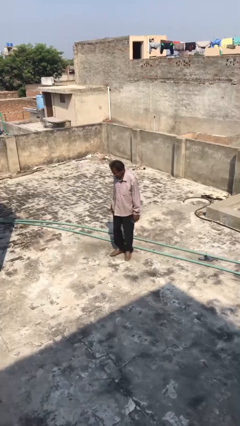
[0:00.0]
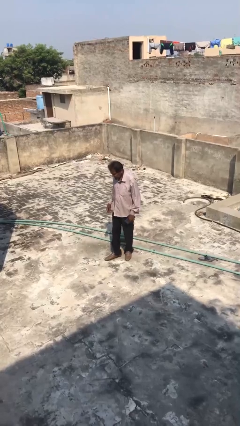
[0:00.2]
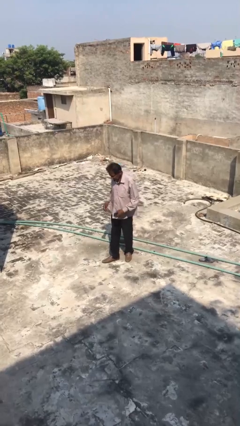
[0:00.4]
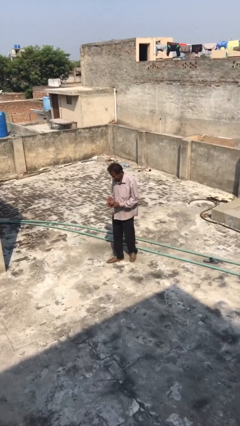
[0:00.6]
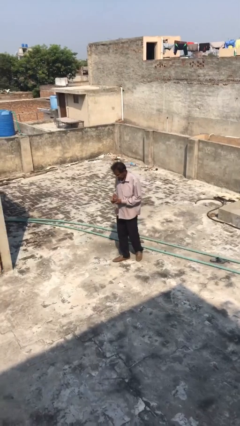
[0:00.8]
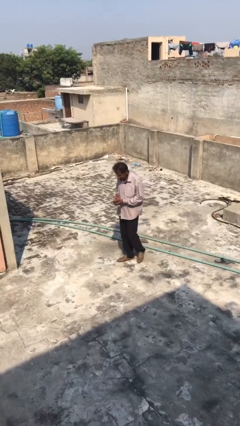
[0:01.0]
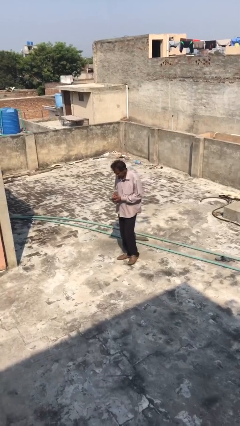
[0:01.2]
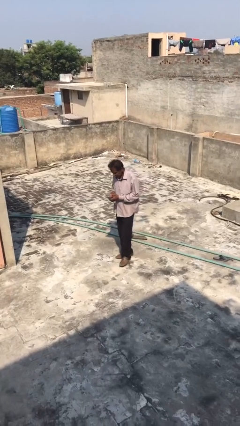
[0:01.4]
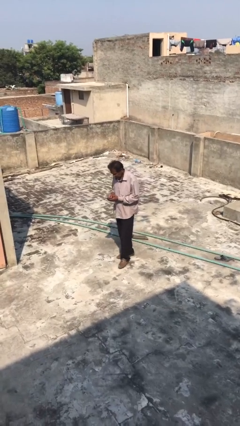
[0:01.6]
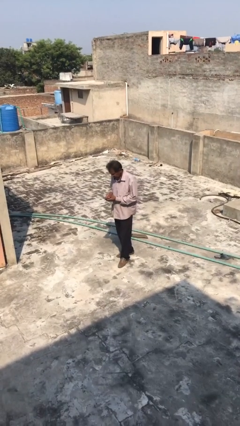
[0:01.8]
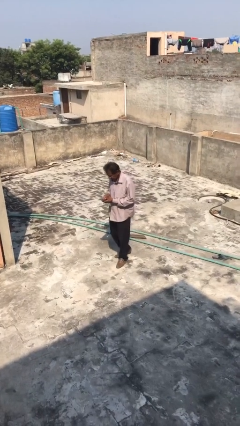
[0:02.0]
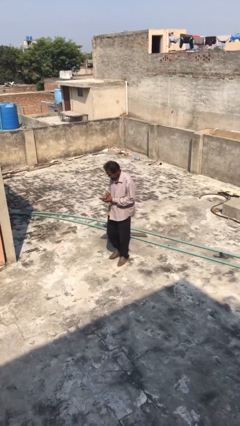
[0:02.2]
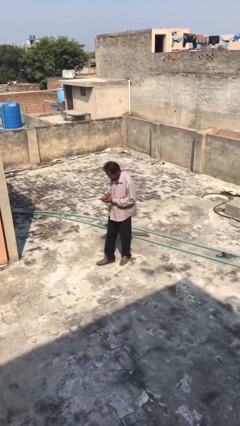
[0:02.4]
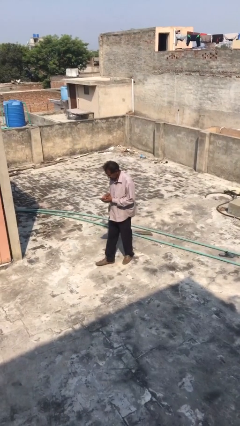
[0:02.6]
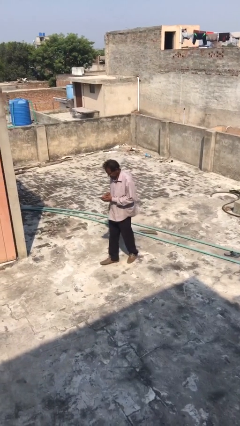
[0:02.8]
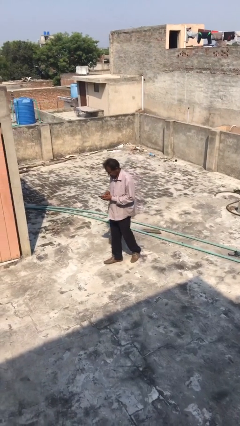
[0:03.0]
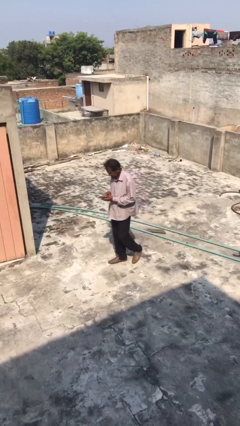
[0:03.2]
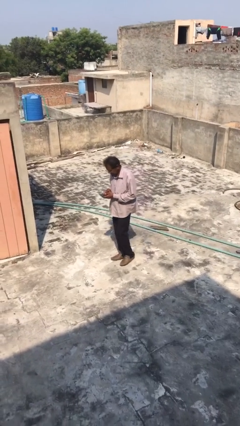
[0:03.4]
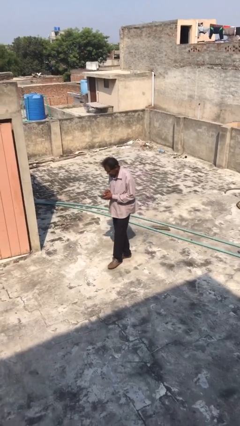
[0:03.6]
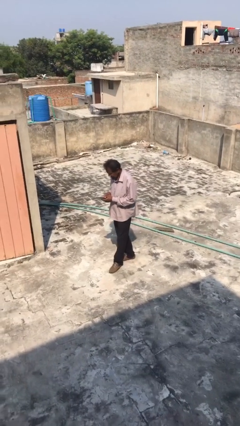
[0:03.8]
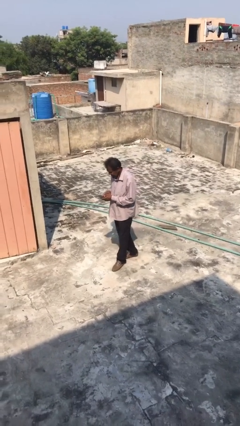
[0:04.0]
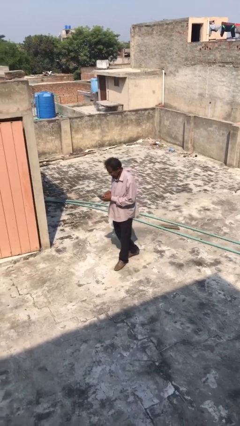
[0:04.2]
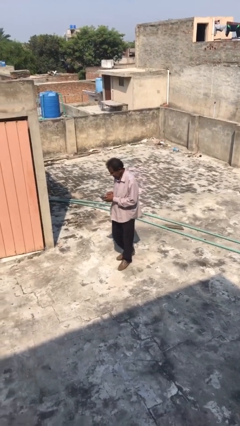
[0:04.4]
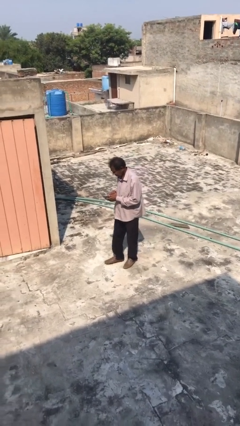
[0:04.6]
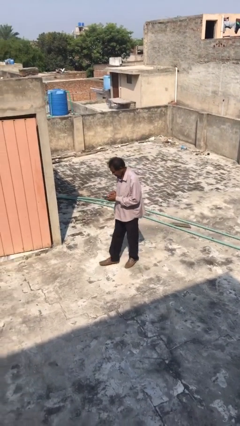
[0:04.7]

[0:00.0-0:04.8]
person texts on phone

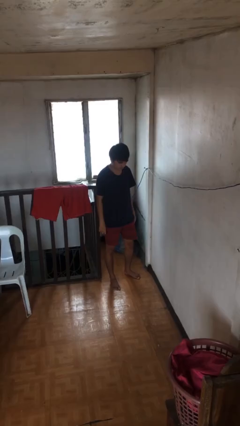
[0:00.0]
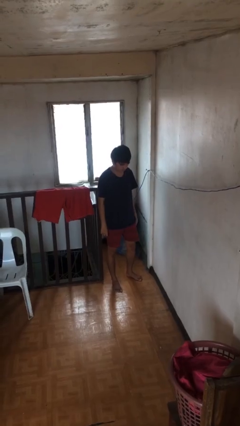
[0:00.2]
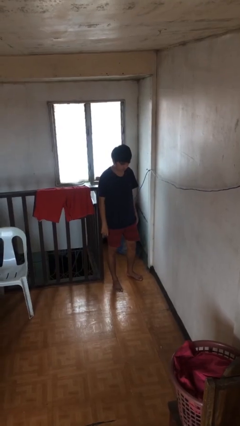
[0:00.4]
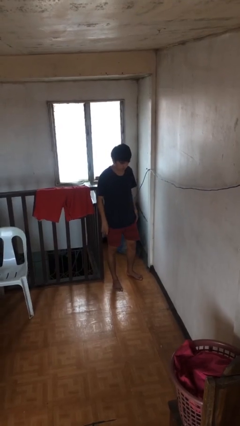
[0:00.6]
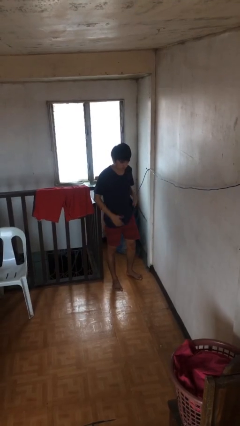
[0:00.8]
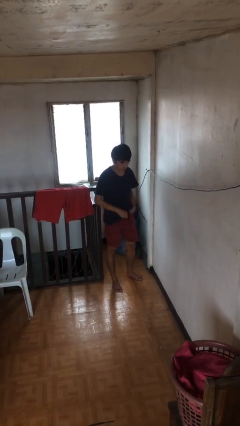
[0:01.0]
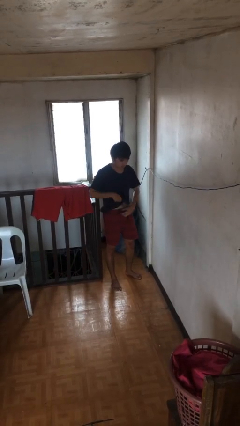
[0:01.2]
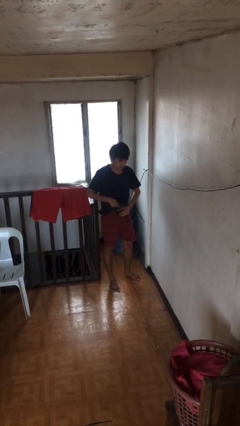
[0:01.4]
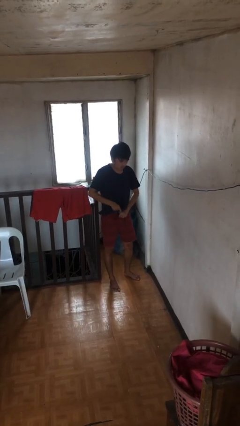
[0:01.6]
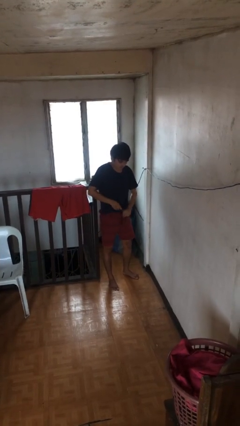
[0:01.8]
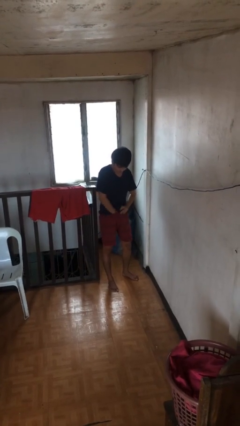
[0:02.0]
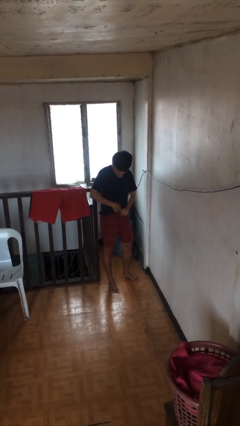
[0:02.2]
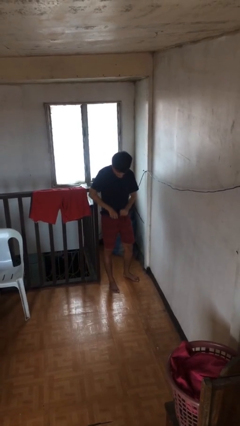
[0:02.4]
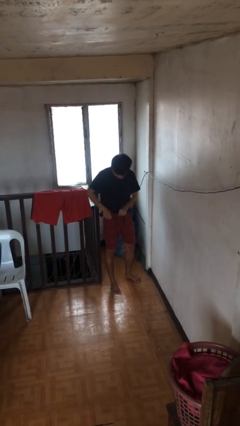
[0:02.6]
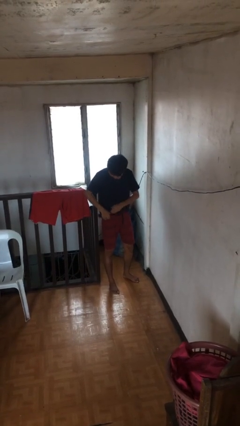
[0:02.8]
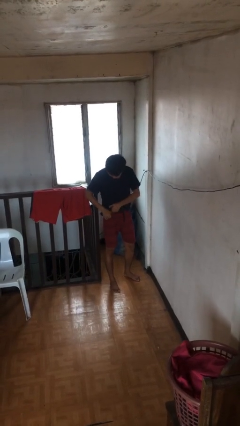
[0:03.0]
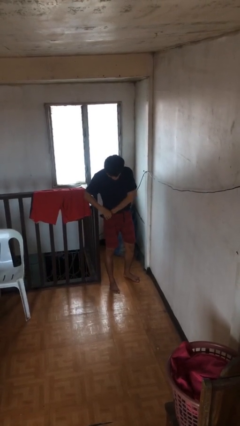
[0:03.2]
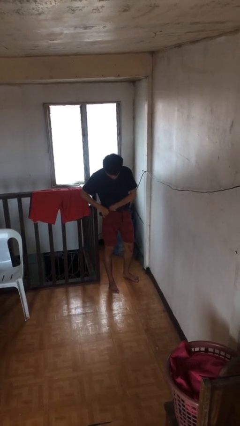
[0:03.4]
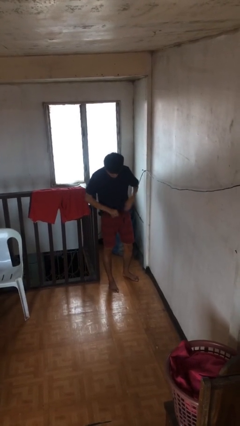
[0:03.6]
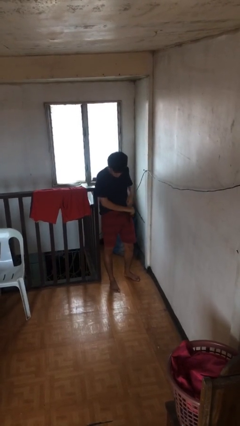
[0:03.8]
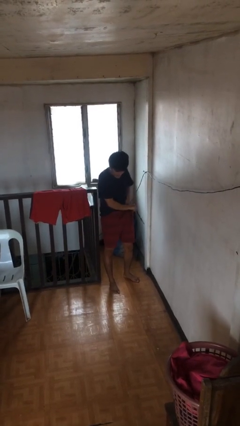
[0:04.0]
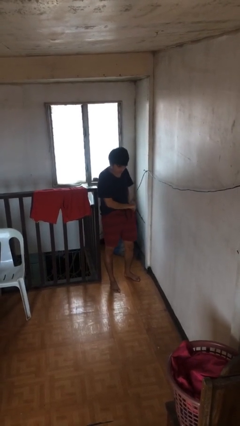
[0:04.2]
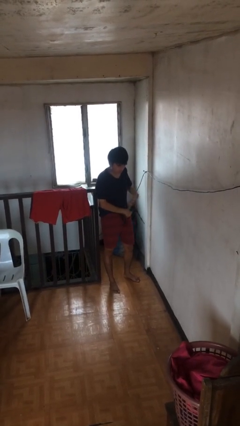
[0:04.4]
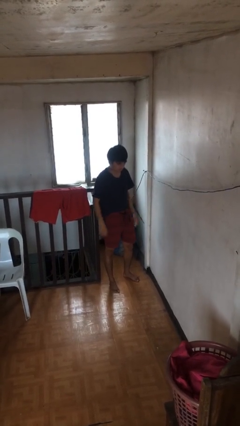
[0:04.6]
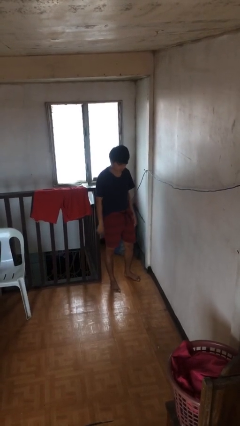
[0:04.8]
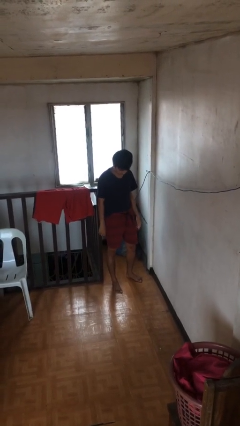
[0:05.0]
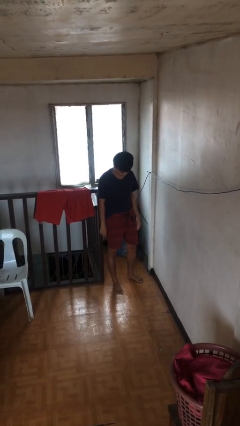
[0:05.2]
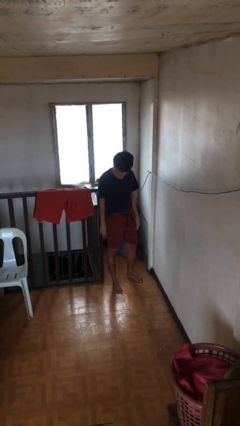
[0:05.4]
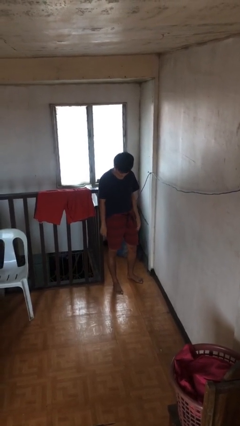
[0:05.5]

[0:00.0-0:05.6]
person tucks in shirt

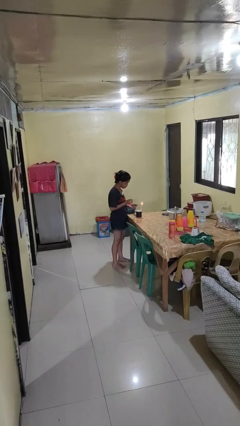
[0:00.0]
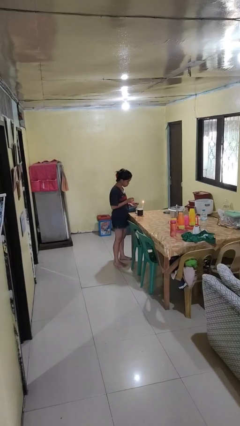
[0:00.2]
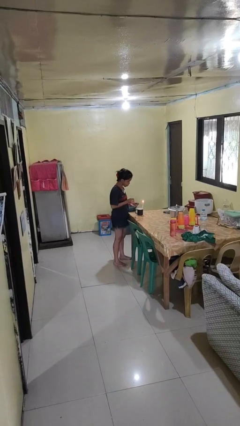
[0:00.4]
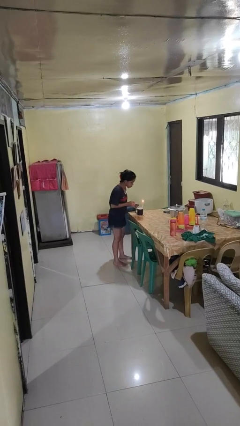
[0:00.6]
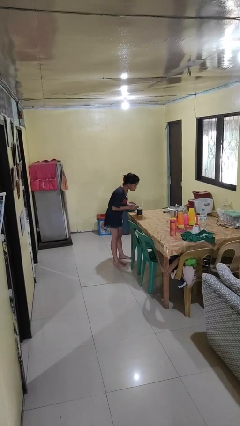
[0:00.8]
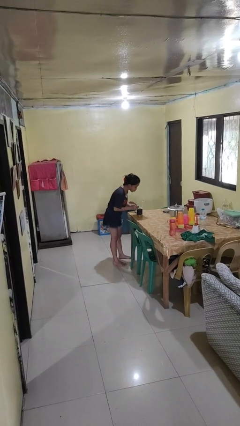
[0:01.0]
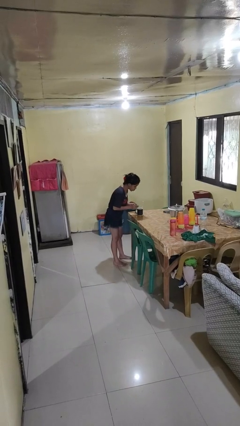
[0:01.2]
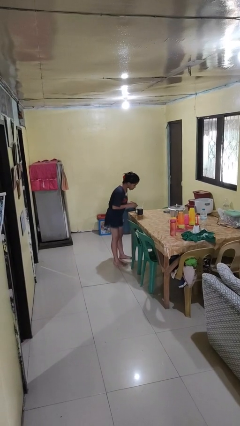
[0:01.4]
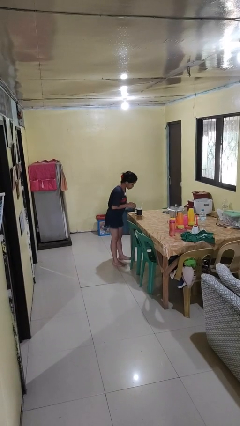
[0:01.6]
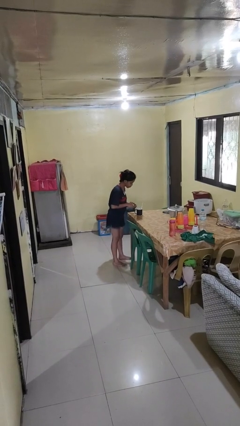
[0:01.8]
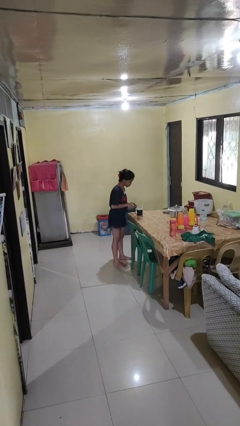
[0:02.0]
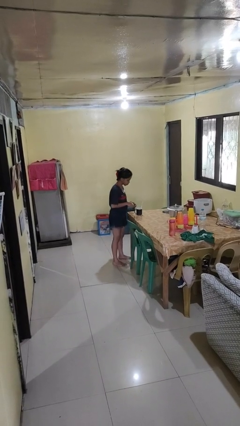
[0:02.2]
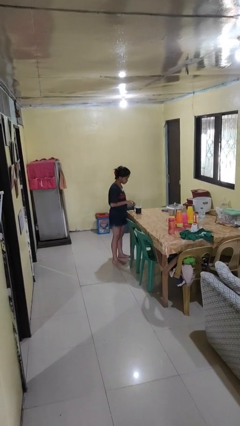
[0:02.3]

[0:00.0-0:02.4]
person extinguishes candle

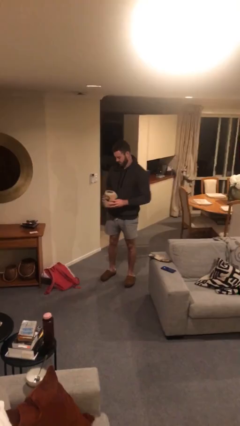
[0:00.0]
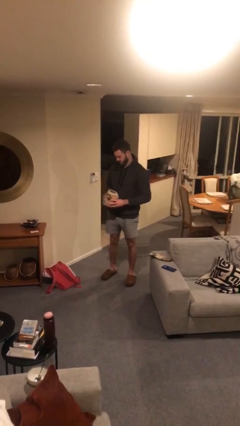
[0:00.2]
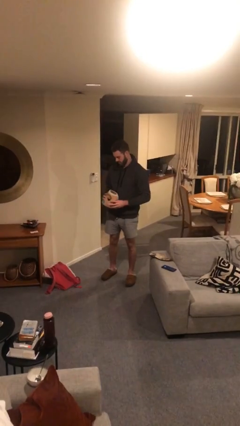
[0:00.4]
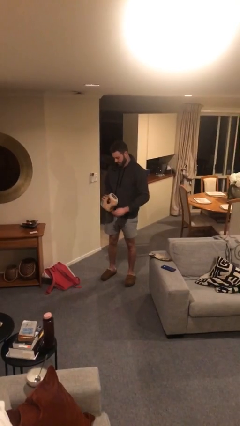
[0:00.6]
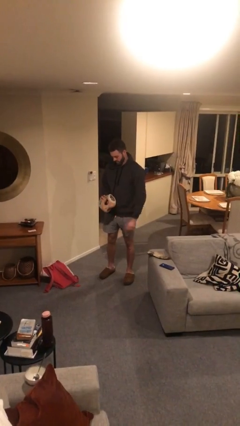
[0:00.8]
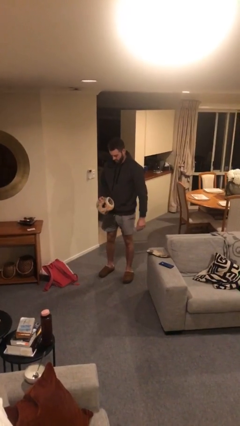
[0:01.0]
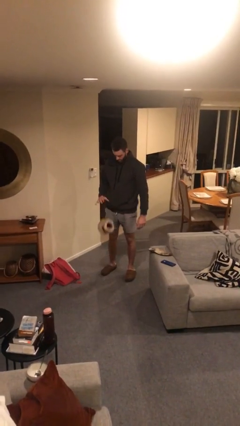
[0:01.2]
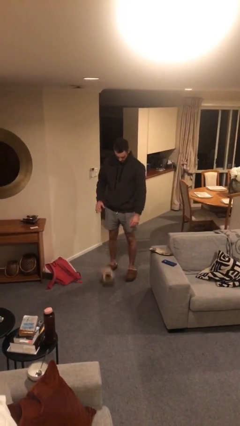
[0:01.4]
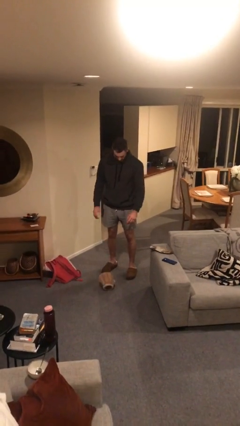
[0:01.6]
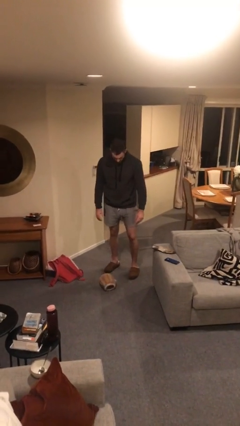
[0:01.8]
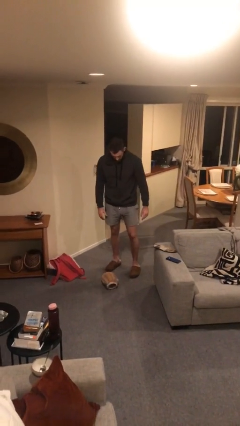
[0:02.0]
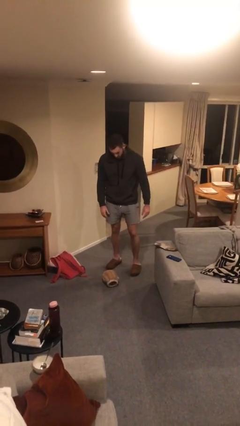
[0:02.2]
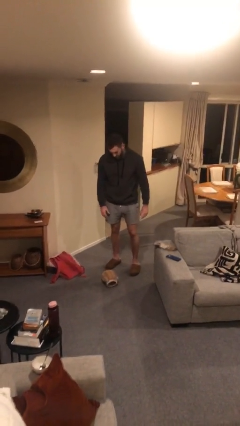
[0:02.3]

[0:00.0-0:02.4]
person drops object

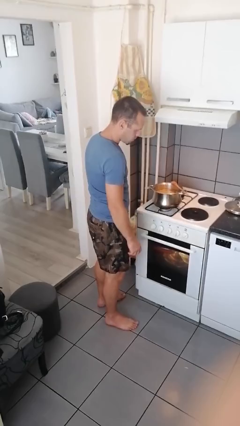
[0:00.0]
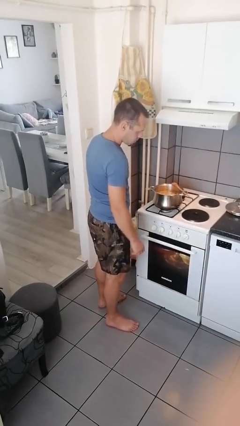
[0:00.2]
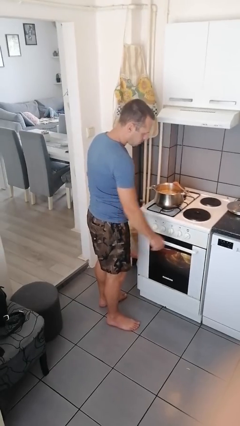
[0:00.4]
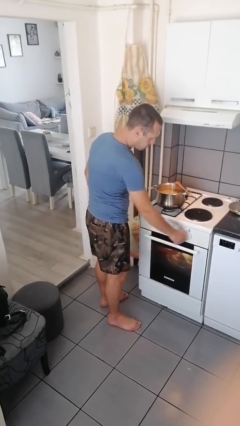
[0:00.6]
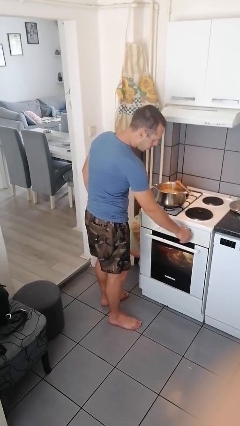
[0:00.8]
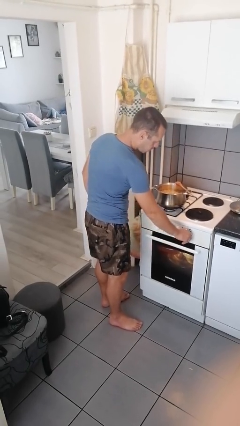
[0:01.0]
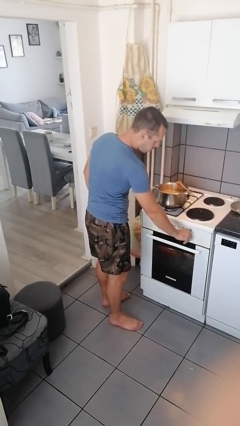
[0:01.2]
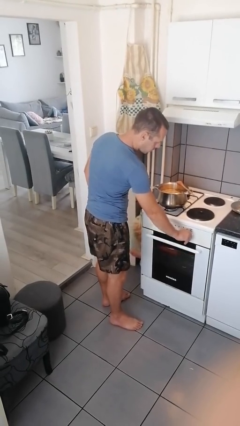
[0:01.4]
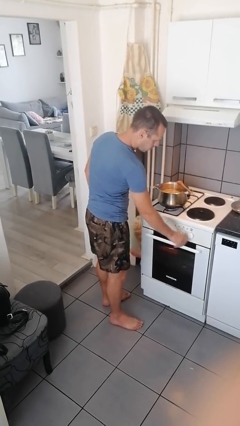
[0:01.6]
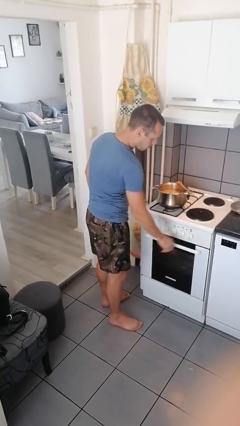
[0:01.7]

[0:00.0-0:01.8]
person turns off stovetop

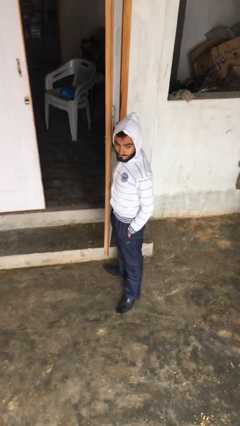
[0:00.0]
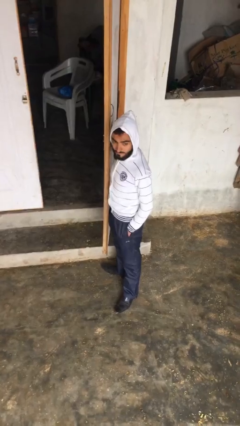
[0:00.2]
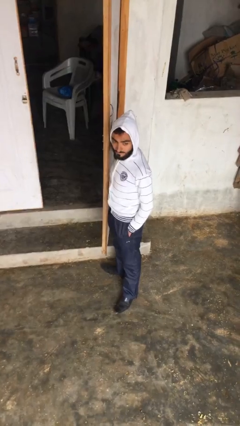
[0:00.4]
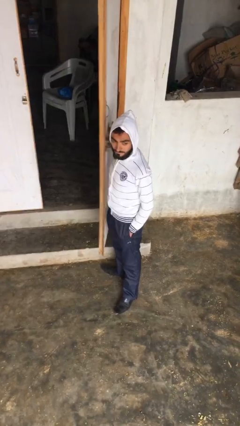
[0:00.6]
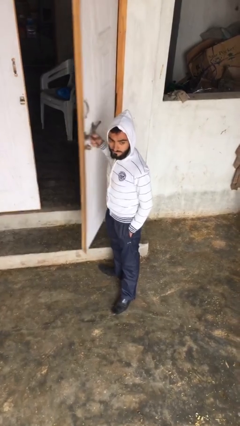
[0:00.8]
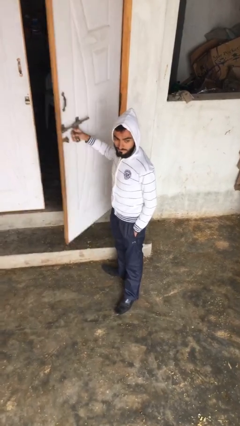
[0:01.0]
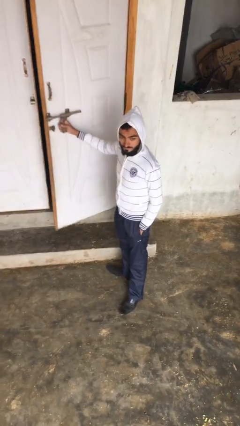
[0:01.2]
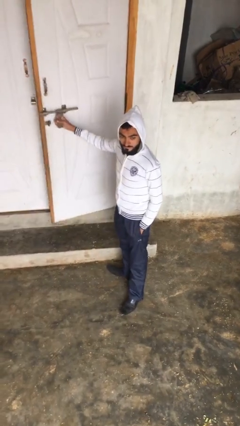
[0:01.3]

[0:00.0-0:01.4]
person closes facility door
